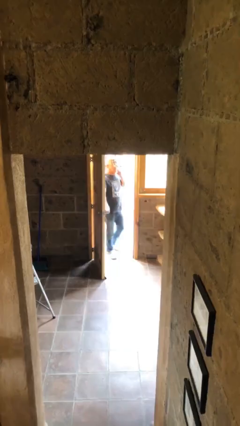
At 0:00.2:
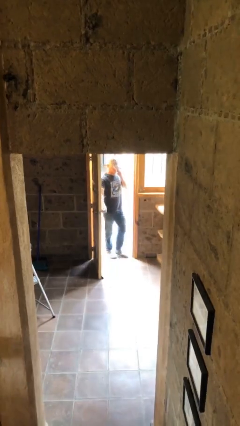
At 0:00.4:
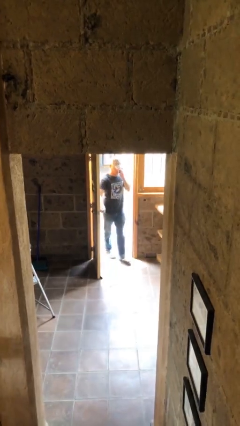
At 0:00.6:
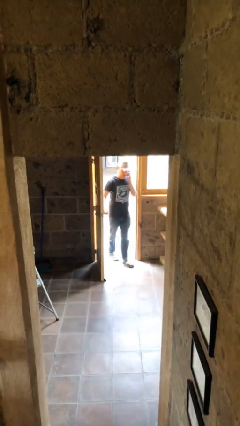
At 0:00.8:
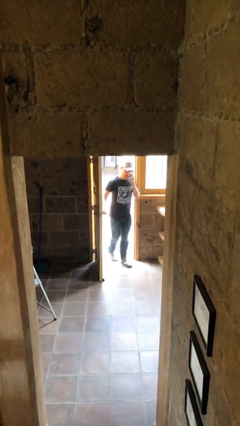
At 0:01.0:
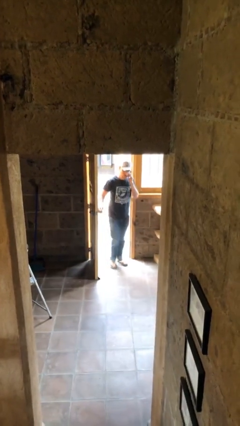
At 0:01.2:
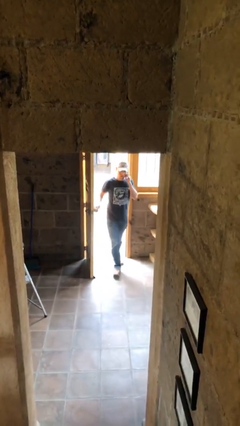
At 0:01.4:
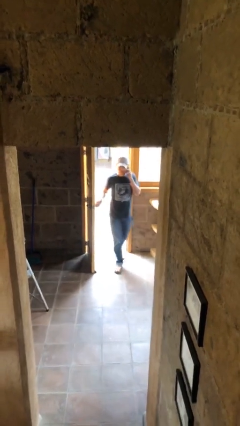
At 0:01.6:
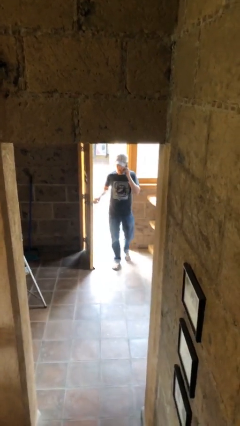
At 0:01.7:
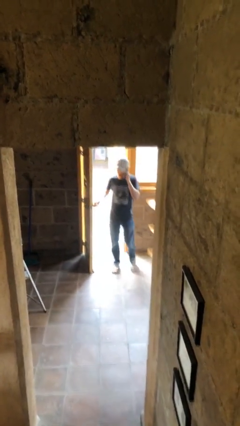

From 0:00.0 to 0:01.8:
person enters scene through structure

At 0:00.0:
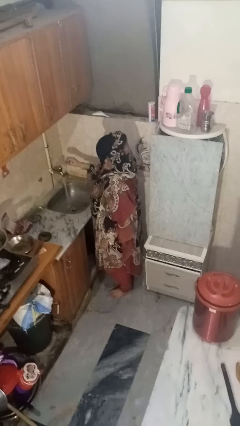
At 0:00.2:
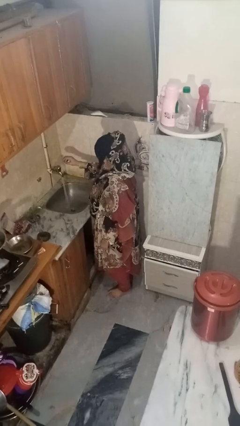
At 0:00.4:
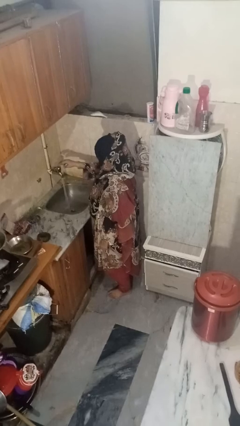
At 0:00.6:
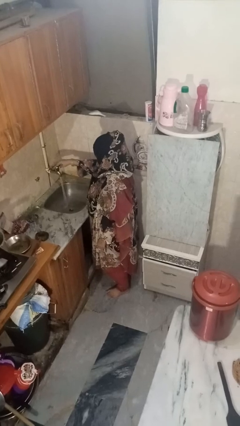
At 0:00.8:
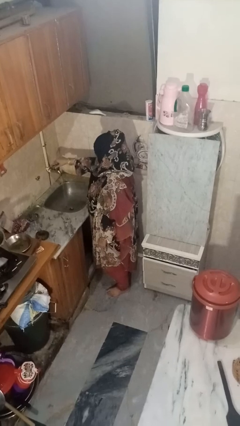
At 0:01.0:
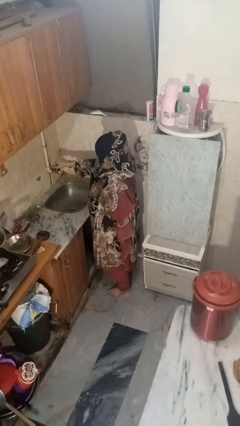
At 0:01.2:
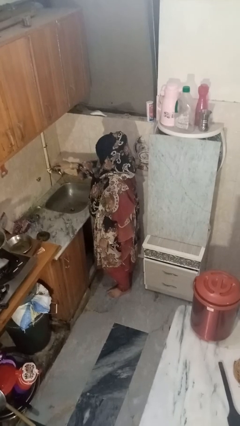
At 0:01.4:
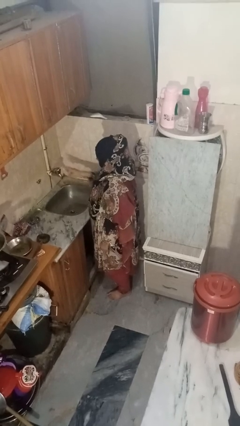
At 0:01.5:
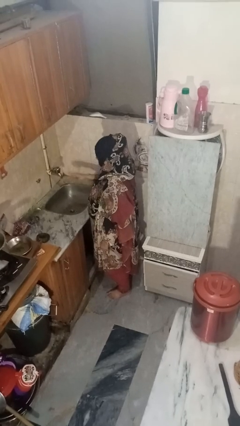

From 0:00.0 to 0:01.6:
person turns off faucet

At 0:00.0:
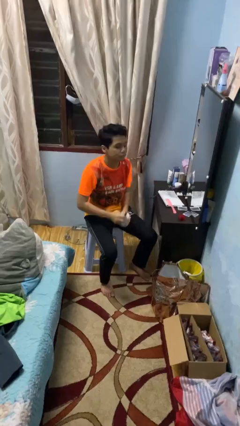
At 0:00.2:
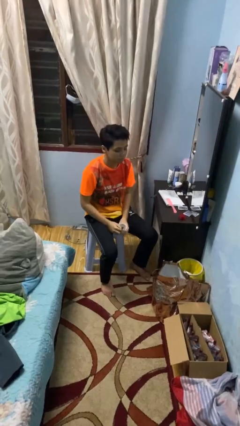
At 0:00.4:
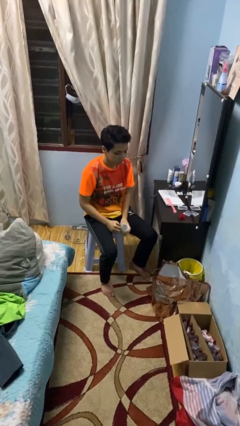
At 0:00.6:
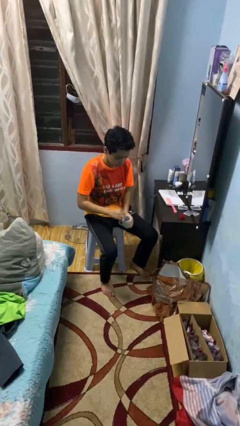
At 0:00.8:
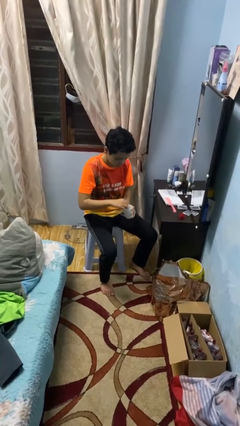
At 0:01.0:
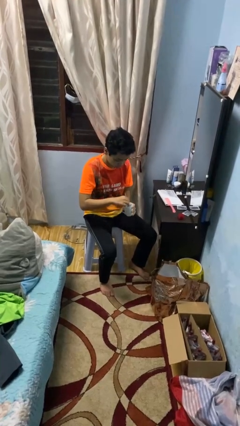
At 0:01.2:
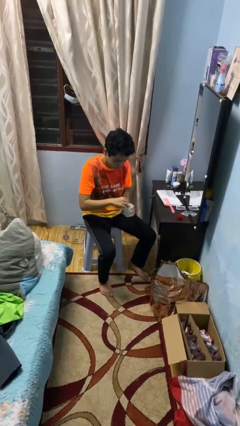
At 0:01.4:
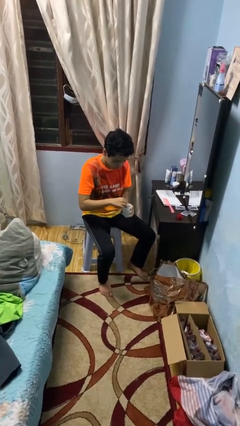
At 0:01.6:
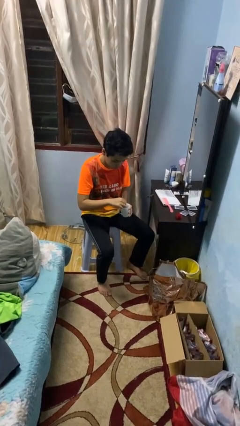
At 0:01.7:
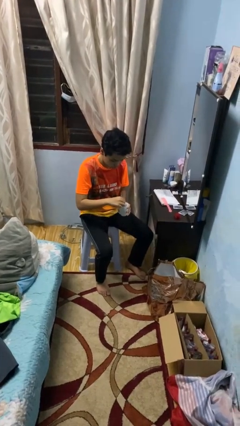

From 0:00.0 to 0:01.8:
person stirs mug

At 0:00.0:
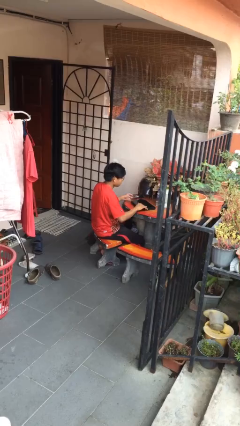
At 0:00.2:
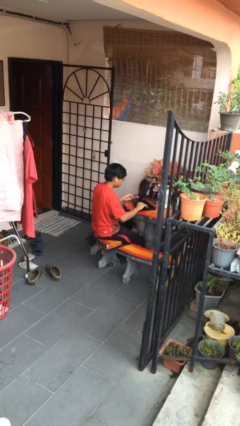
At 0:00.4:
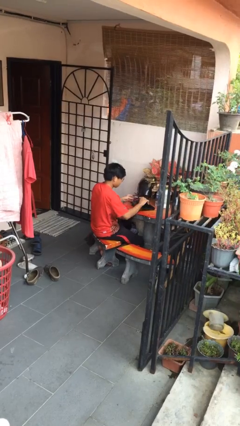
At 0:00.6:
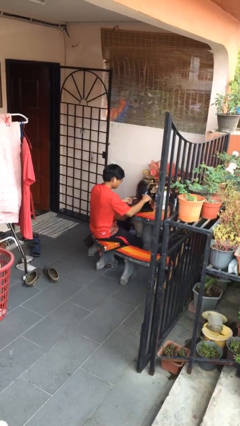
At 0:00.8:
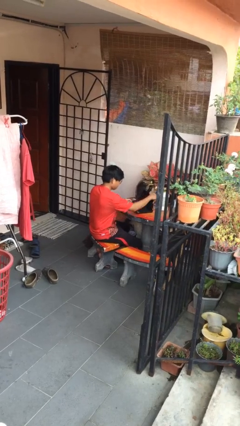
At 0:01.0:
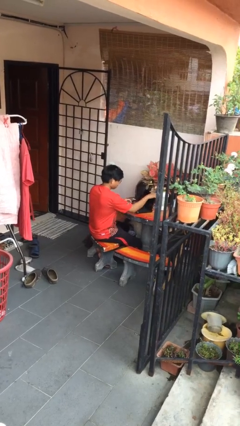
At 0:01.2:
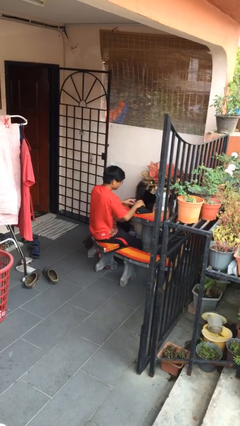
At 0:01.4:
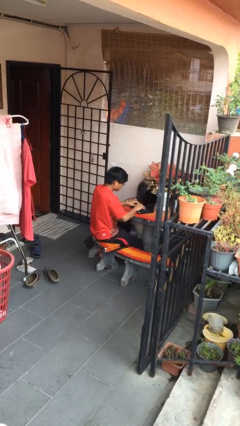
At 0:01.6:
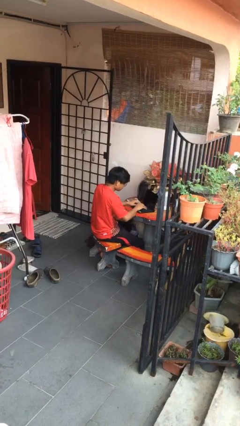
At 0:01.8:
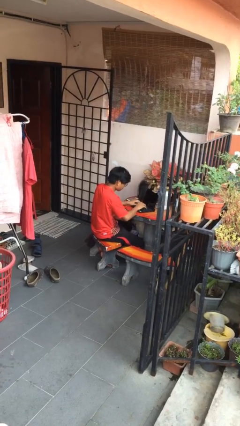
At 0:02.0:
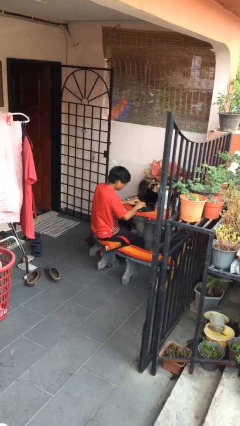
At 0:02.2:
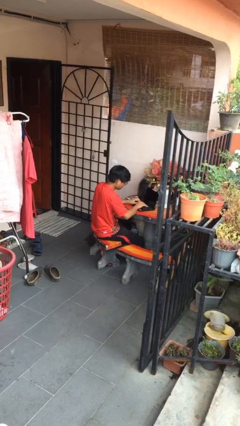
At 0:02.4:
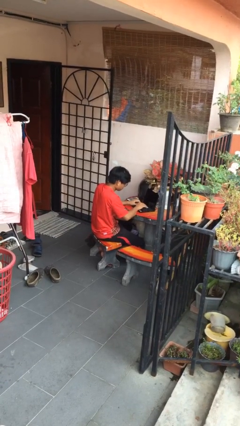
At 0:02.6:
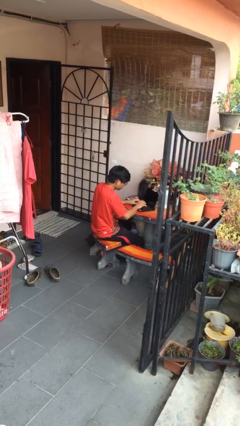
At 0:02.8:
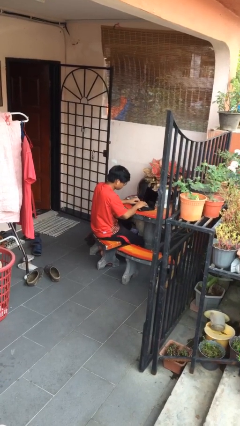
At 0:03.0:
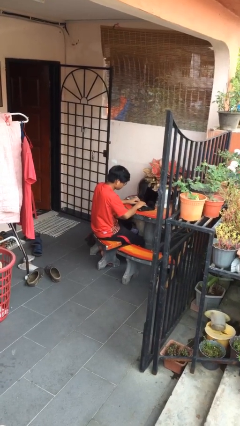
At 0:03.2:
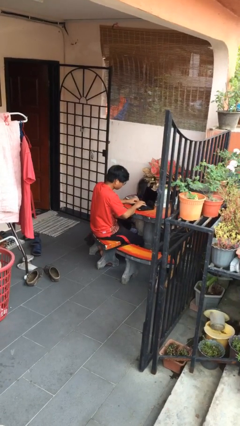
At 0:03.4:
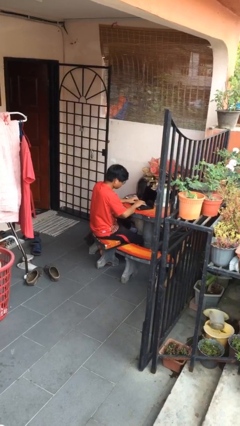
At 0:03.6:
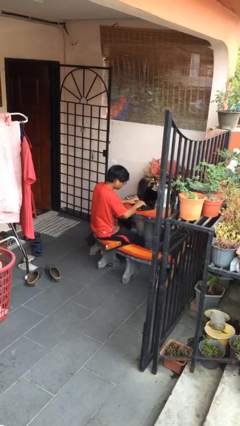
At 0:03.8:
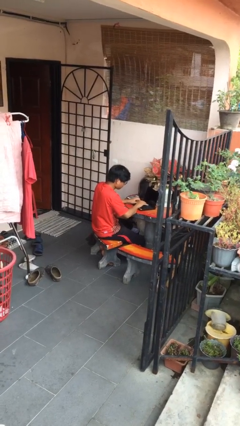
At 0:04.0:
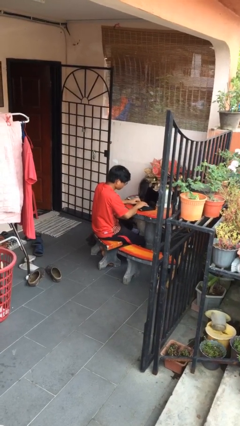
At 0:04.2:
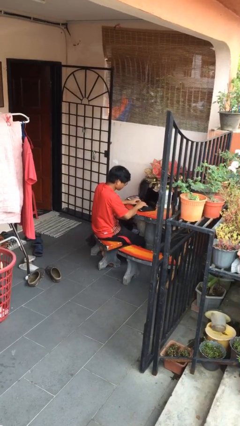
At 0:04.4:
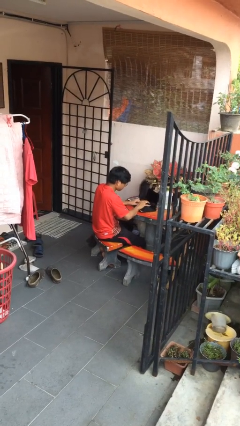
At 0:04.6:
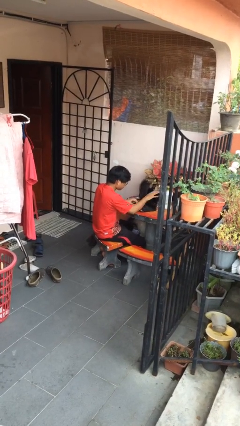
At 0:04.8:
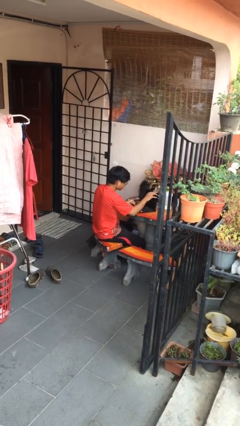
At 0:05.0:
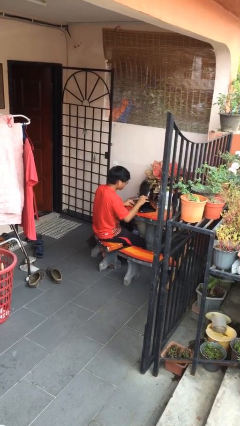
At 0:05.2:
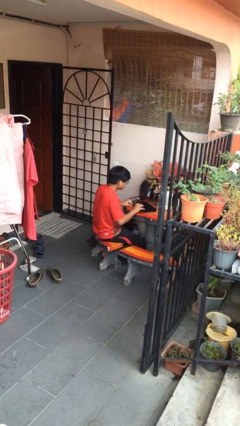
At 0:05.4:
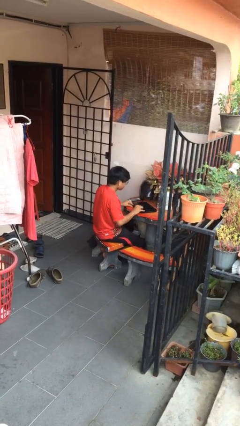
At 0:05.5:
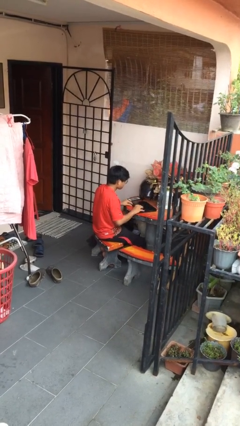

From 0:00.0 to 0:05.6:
person interacts with laptop

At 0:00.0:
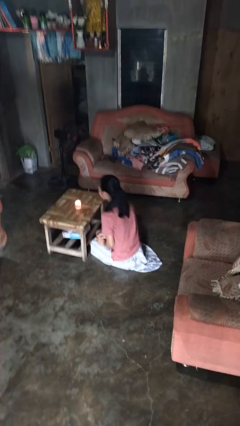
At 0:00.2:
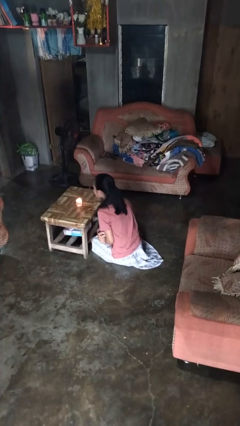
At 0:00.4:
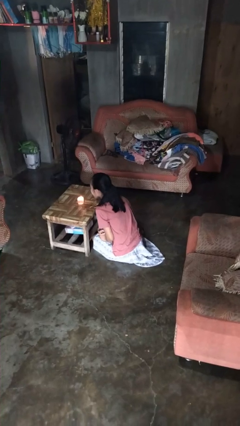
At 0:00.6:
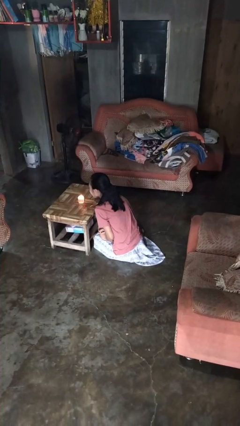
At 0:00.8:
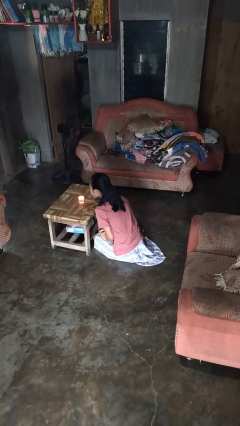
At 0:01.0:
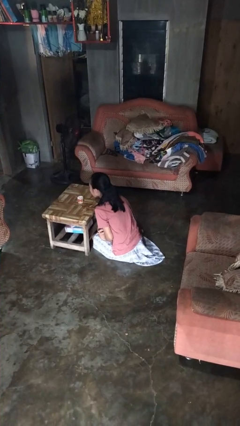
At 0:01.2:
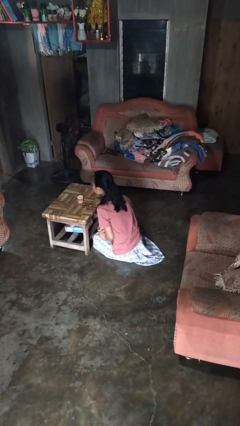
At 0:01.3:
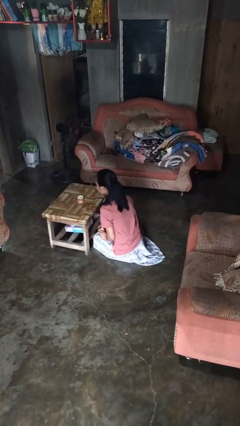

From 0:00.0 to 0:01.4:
person extinguishes candle

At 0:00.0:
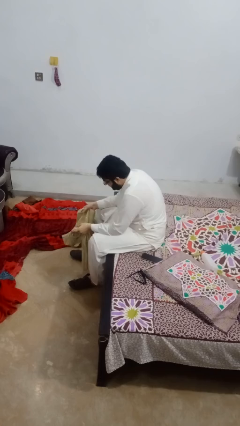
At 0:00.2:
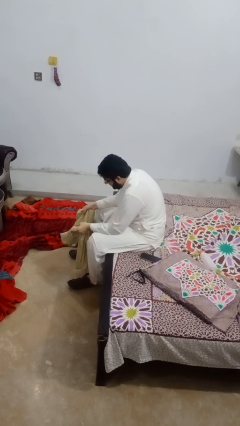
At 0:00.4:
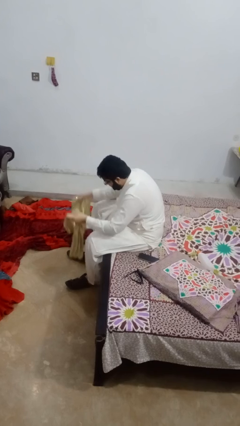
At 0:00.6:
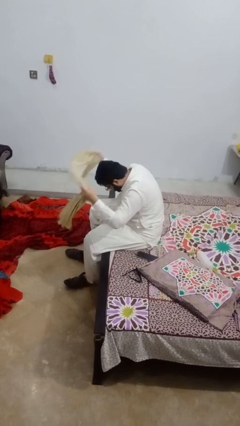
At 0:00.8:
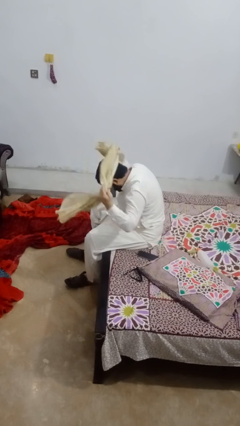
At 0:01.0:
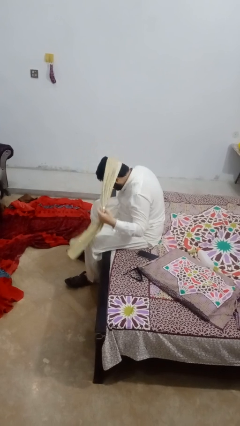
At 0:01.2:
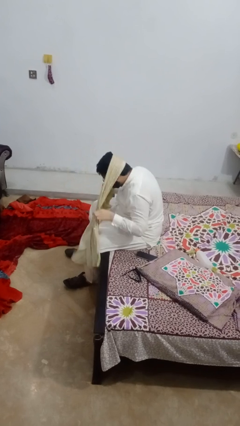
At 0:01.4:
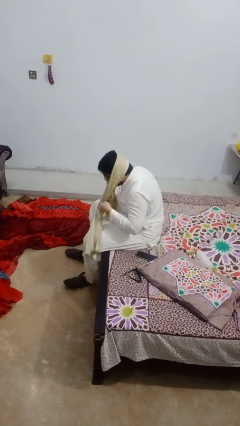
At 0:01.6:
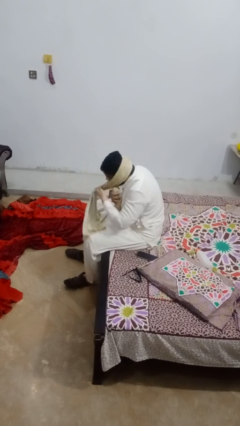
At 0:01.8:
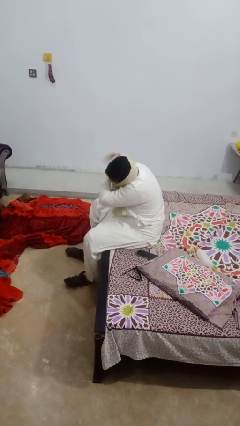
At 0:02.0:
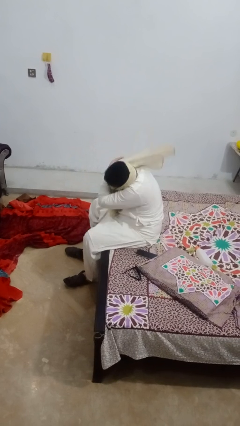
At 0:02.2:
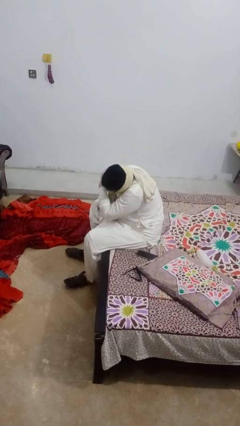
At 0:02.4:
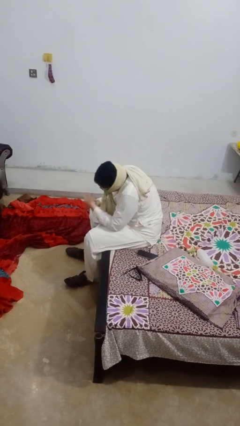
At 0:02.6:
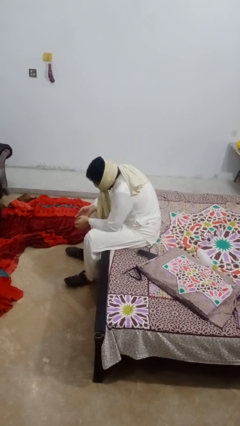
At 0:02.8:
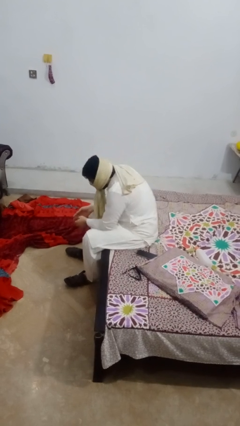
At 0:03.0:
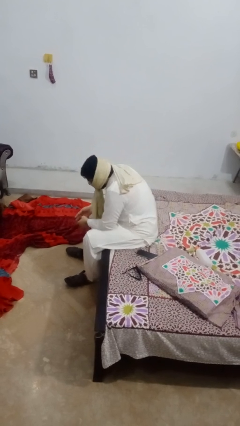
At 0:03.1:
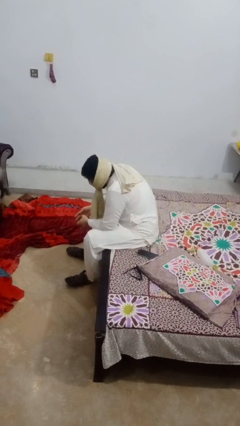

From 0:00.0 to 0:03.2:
person puts on scarf

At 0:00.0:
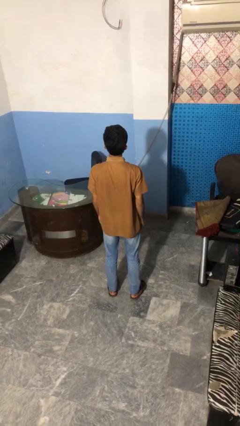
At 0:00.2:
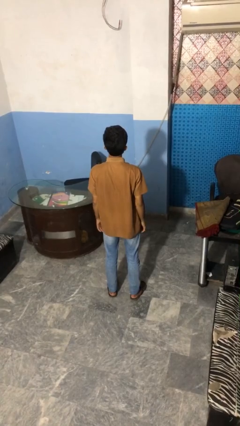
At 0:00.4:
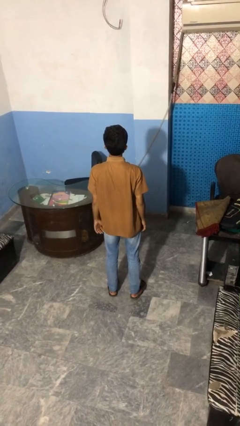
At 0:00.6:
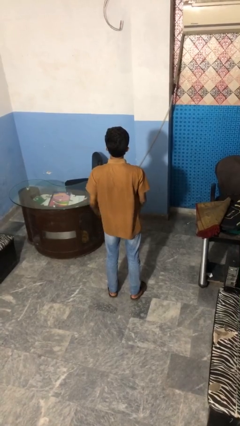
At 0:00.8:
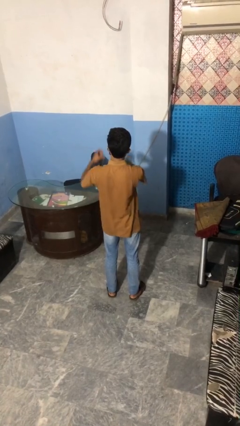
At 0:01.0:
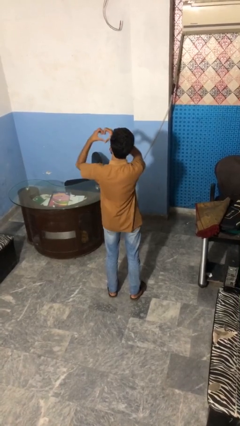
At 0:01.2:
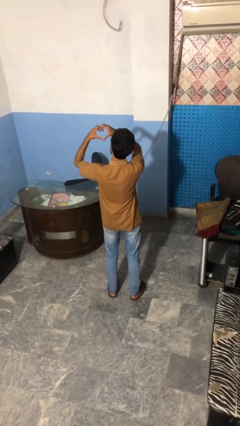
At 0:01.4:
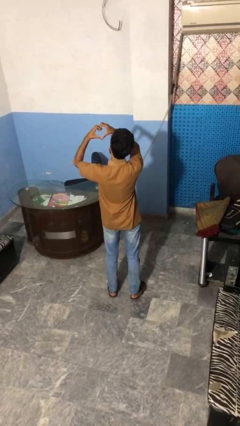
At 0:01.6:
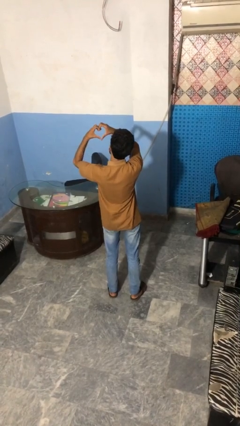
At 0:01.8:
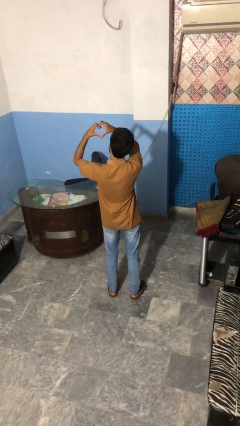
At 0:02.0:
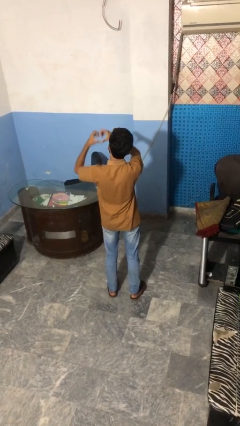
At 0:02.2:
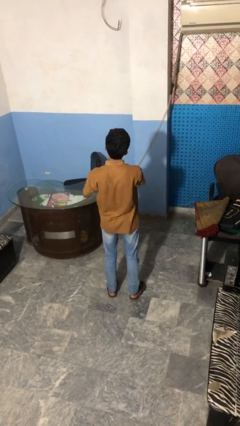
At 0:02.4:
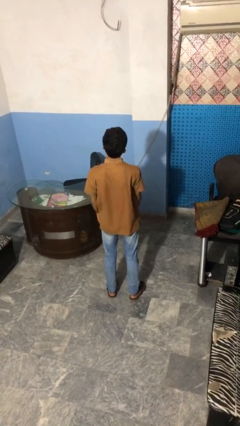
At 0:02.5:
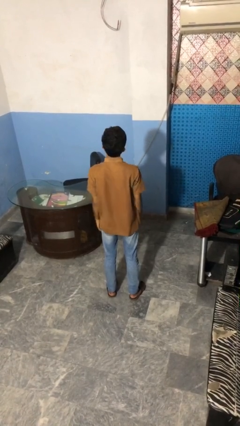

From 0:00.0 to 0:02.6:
person gestures heart
